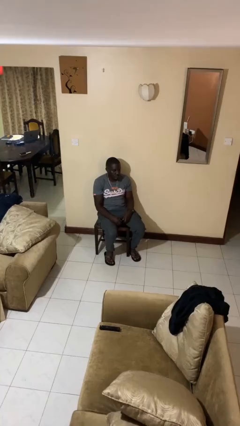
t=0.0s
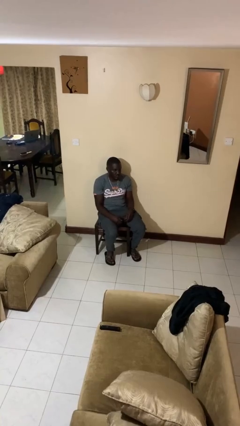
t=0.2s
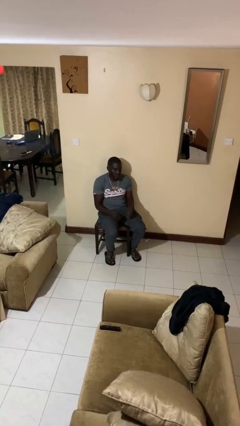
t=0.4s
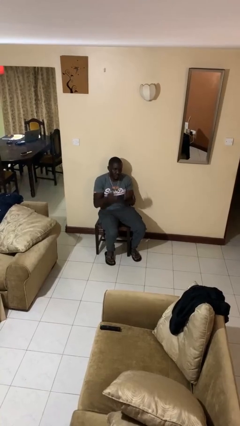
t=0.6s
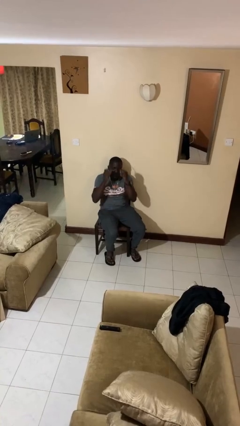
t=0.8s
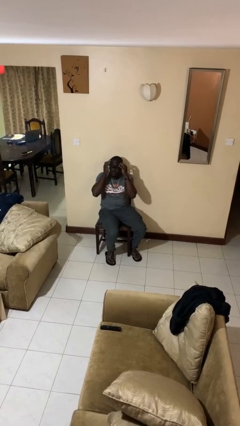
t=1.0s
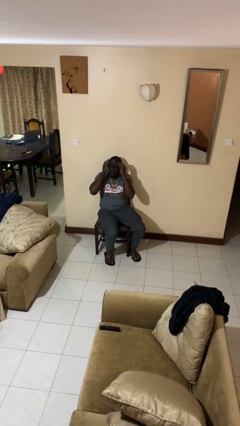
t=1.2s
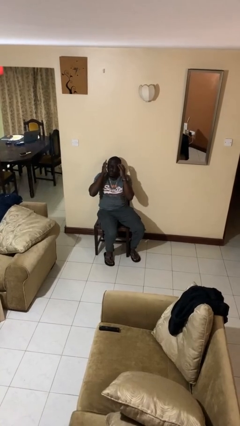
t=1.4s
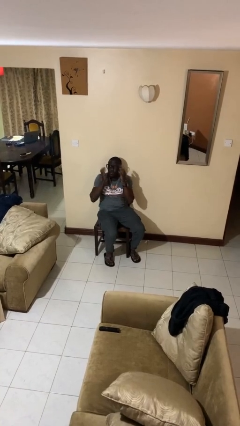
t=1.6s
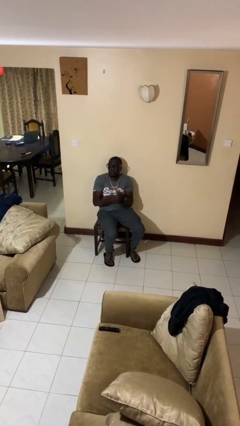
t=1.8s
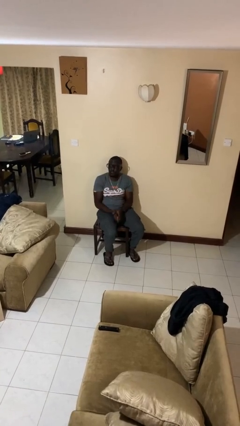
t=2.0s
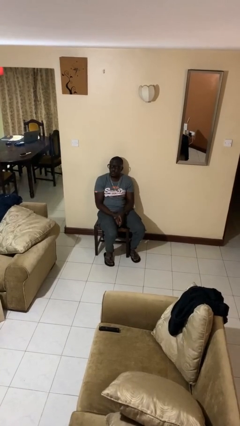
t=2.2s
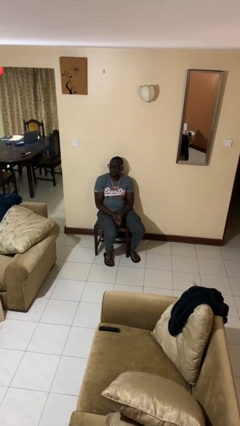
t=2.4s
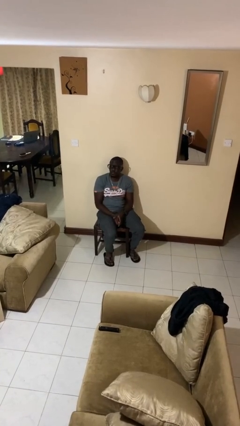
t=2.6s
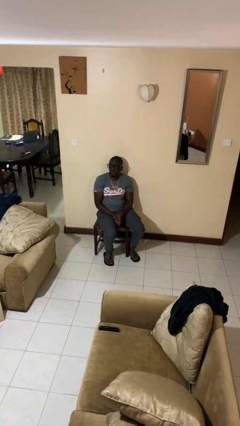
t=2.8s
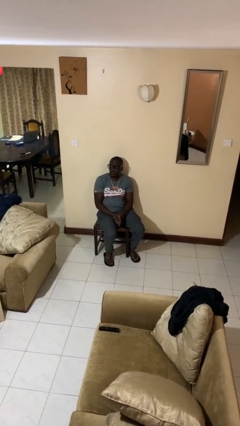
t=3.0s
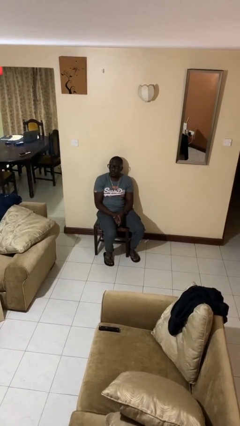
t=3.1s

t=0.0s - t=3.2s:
person puts on glasses

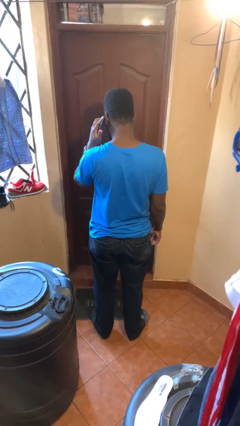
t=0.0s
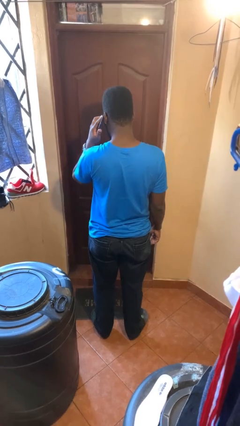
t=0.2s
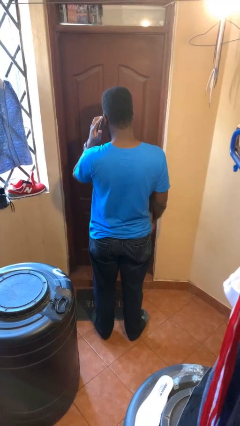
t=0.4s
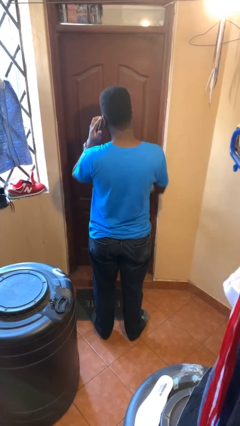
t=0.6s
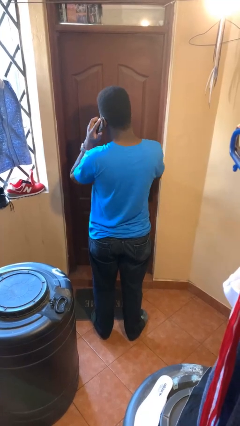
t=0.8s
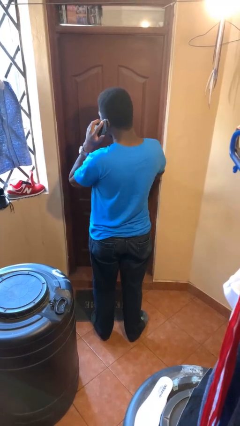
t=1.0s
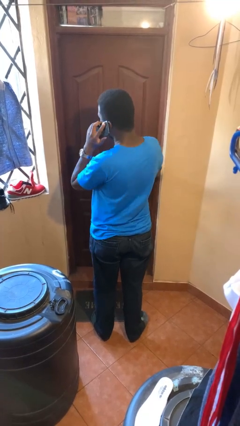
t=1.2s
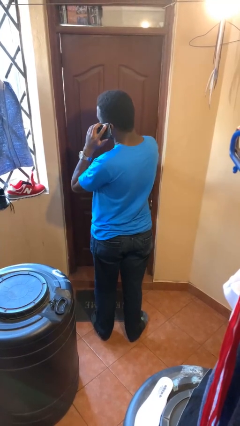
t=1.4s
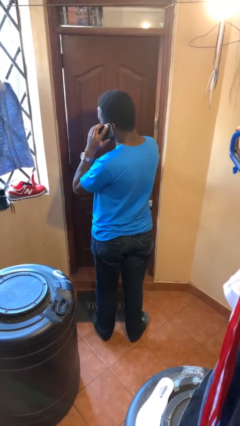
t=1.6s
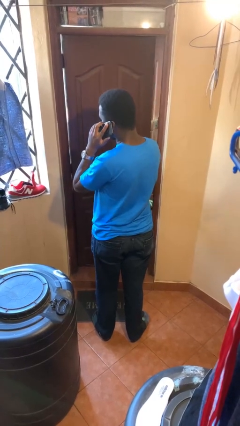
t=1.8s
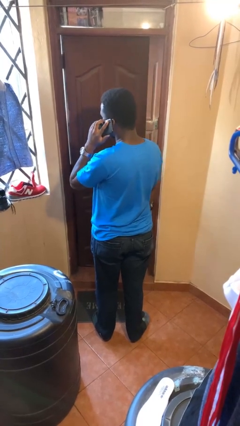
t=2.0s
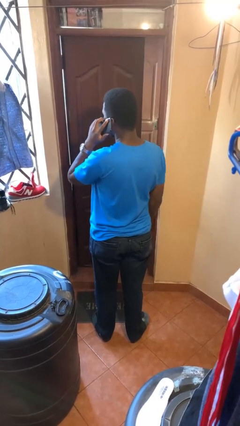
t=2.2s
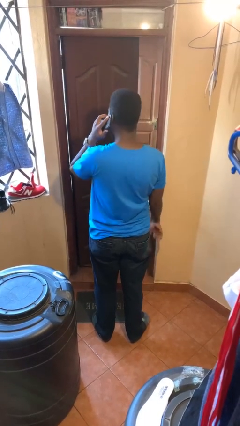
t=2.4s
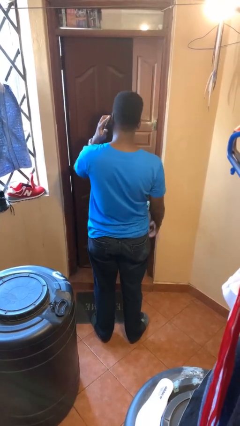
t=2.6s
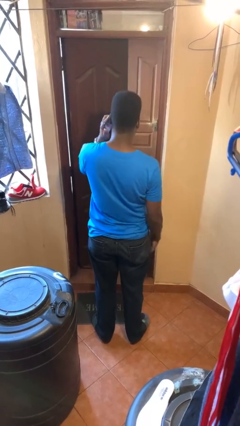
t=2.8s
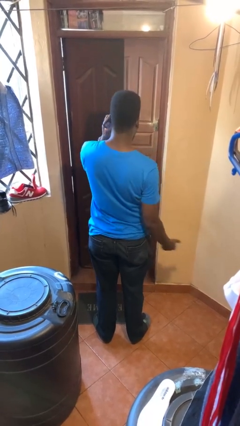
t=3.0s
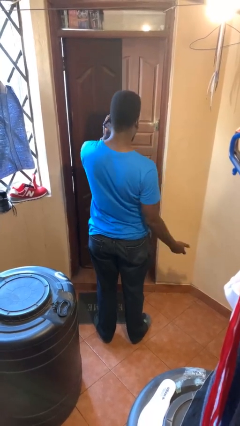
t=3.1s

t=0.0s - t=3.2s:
person opens facility door

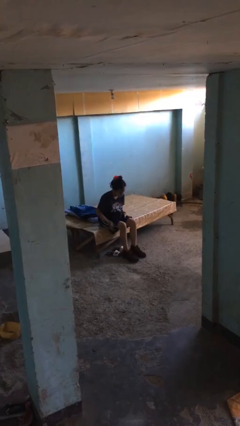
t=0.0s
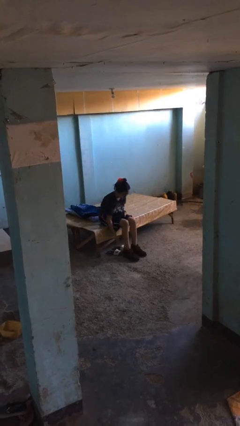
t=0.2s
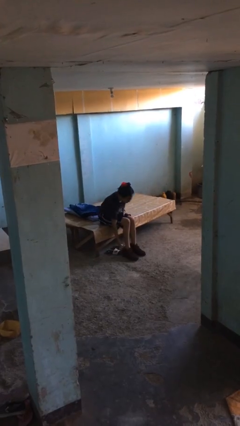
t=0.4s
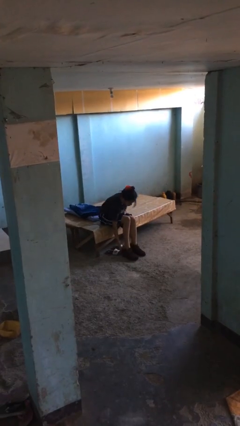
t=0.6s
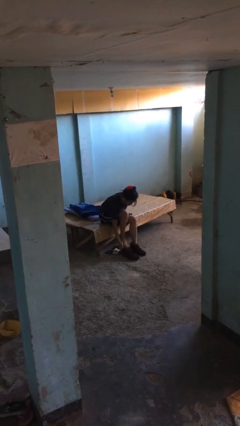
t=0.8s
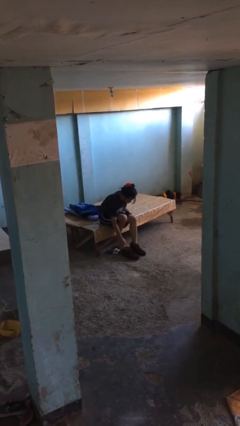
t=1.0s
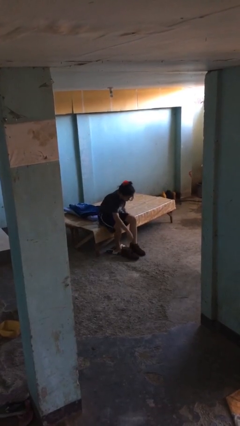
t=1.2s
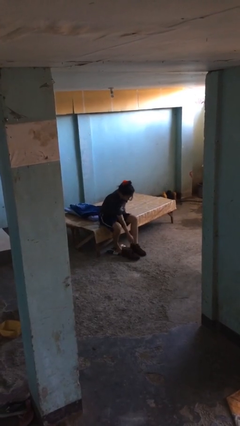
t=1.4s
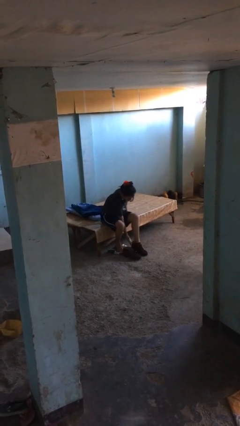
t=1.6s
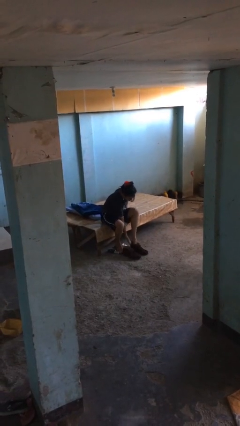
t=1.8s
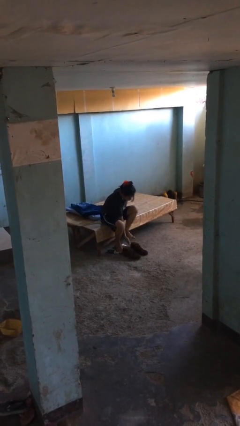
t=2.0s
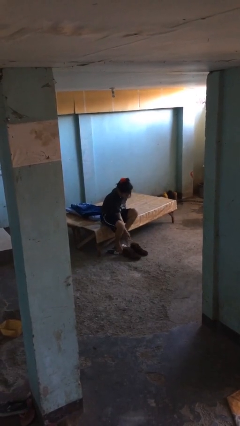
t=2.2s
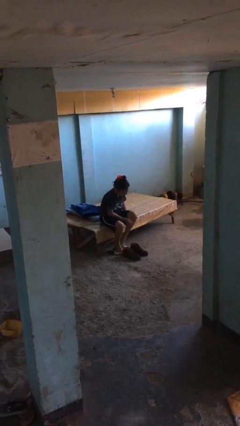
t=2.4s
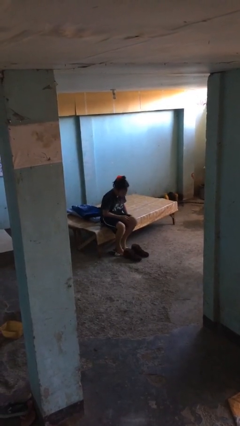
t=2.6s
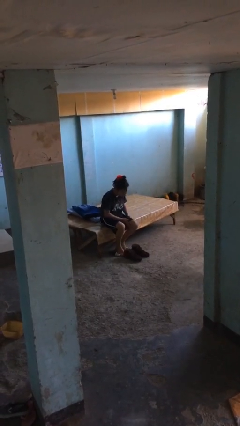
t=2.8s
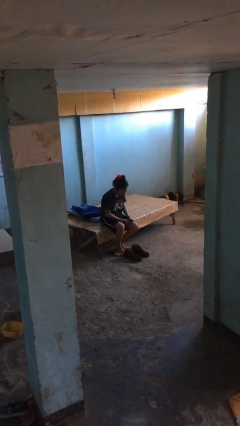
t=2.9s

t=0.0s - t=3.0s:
person takes off boots

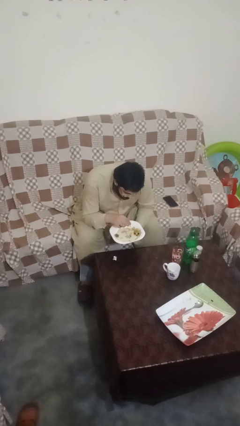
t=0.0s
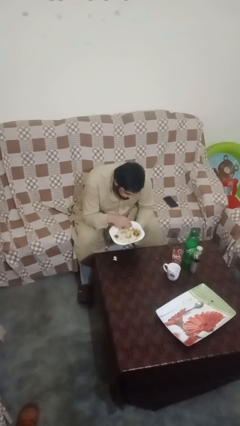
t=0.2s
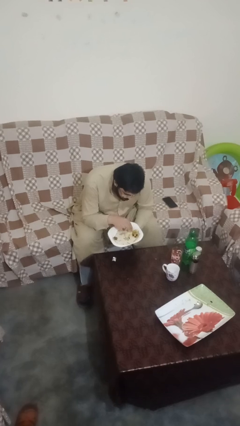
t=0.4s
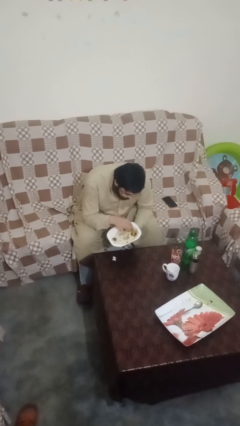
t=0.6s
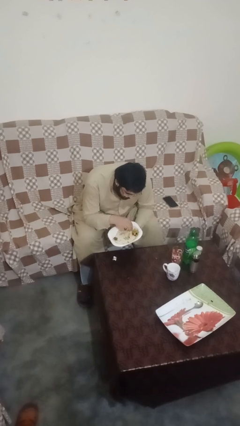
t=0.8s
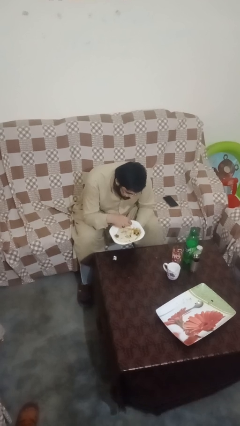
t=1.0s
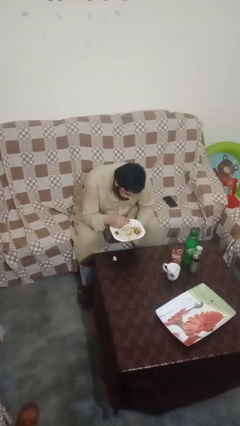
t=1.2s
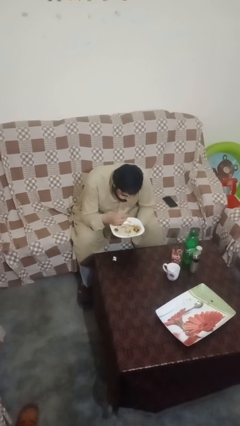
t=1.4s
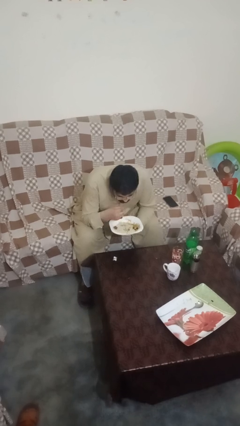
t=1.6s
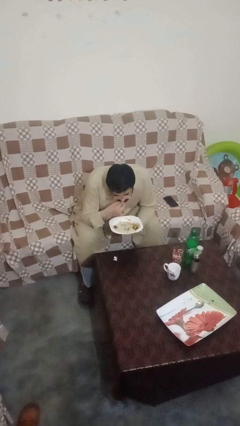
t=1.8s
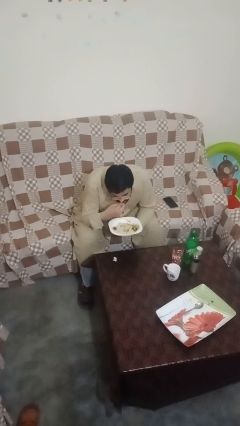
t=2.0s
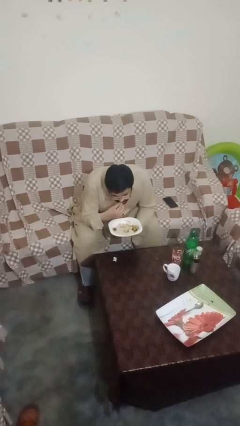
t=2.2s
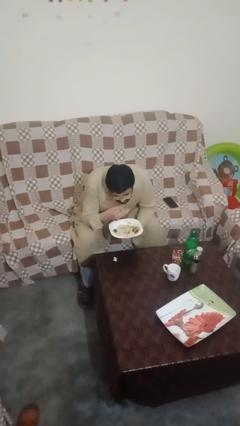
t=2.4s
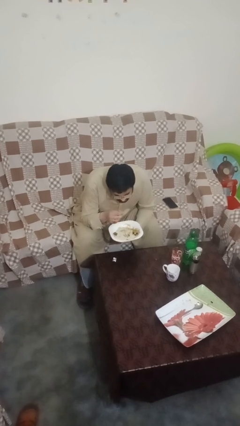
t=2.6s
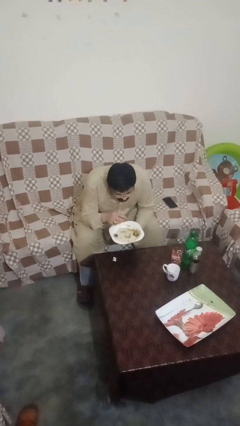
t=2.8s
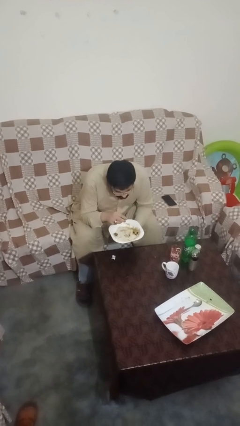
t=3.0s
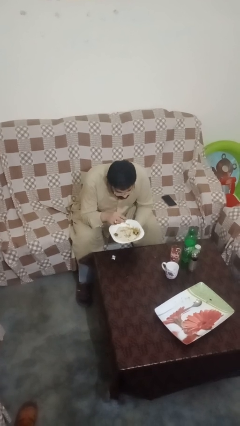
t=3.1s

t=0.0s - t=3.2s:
person eats with hands

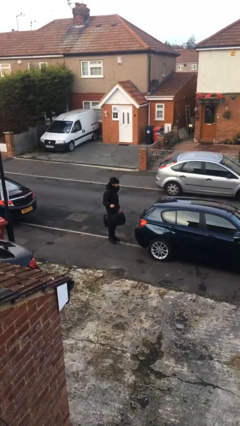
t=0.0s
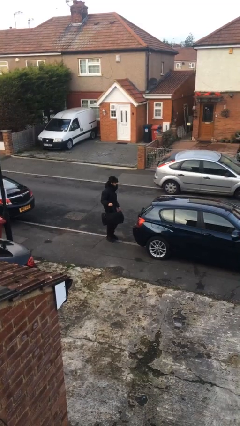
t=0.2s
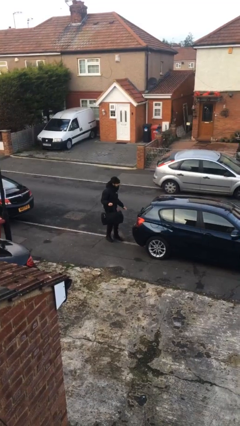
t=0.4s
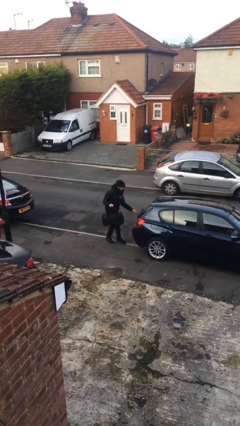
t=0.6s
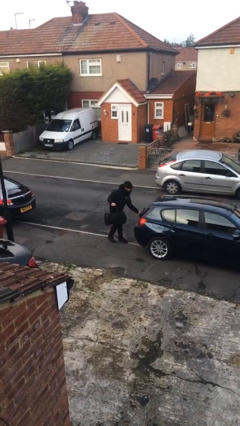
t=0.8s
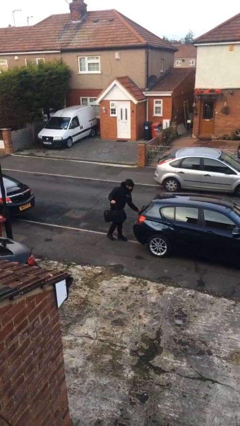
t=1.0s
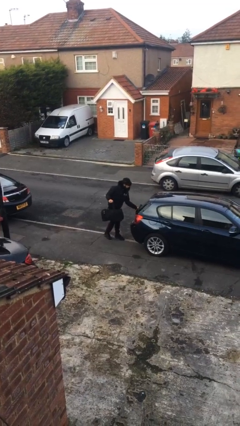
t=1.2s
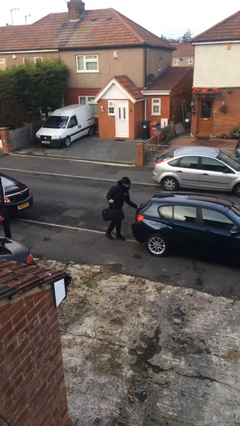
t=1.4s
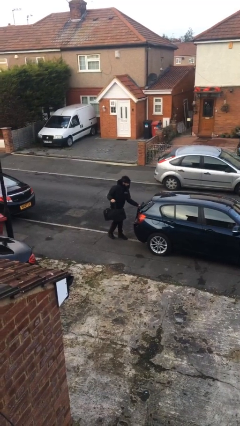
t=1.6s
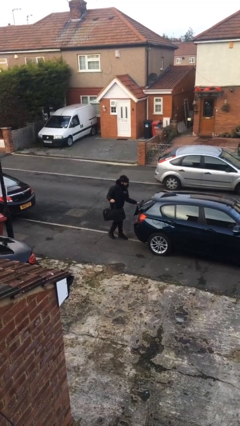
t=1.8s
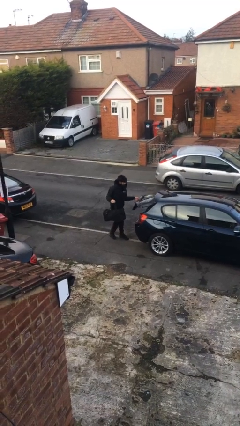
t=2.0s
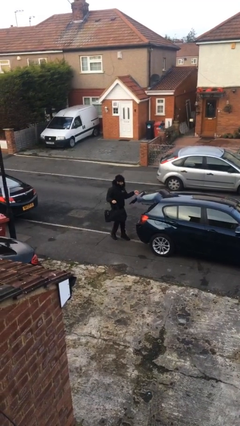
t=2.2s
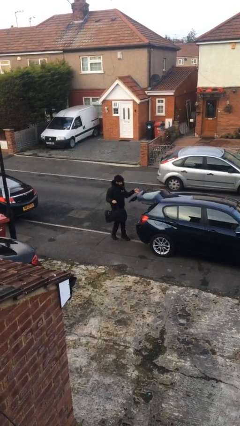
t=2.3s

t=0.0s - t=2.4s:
person opens car trunk

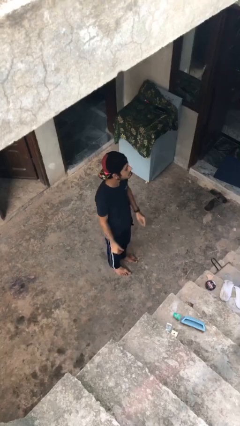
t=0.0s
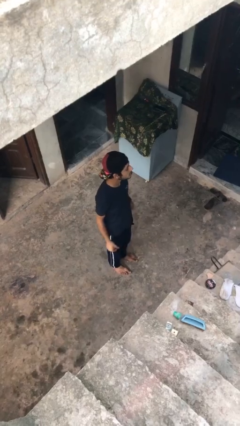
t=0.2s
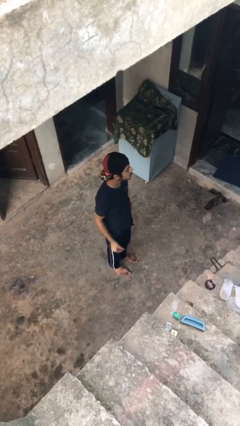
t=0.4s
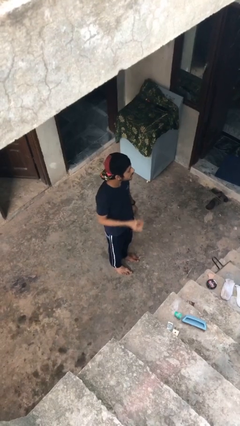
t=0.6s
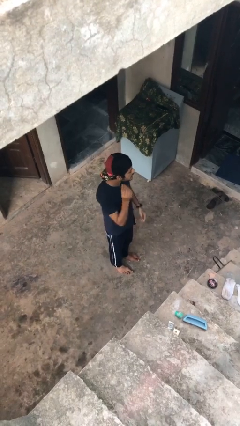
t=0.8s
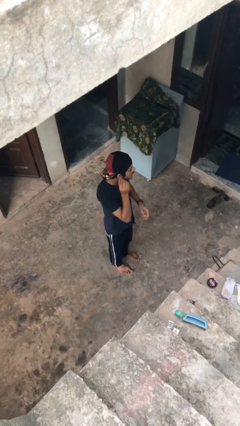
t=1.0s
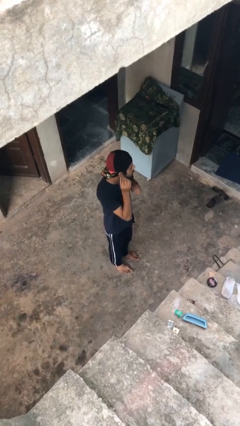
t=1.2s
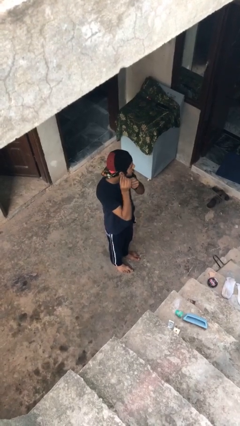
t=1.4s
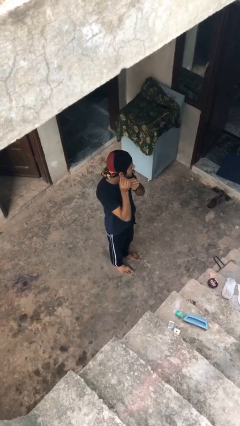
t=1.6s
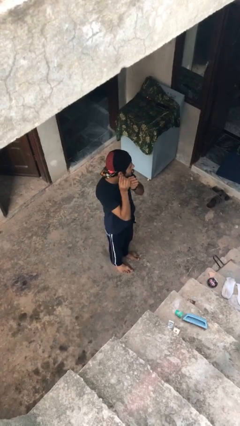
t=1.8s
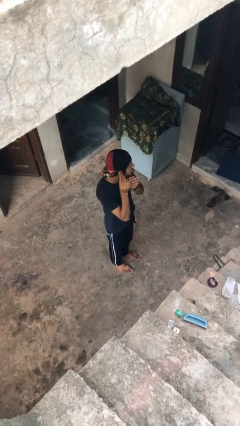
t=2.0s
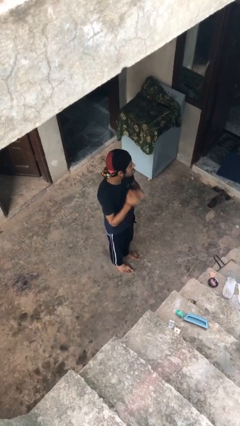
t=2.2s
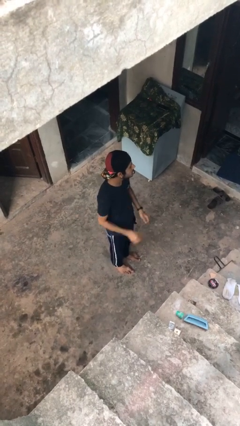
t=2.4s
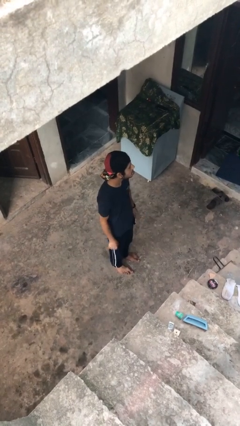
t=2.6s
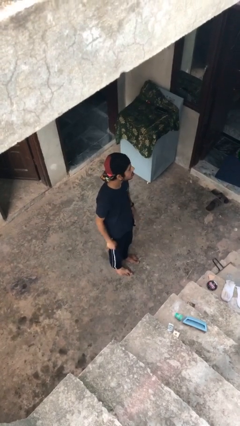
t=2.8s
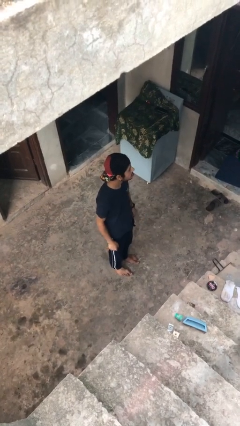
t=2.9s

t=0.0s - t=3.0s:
person puts on earrings
